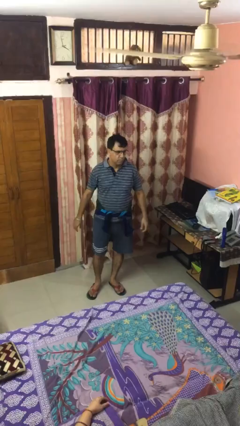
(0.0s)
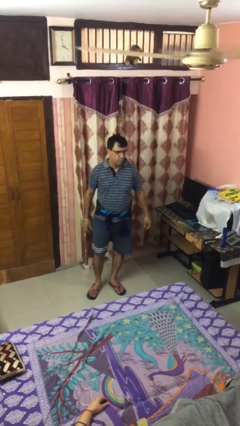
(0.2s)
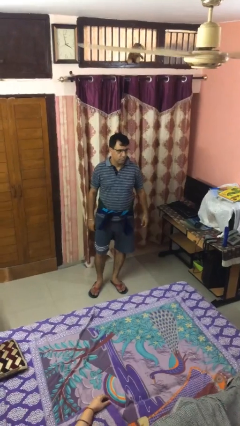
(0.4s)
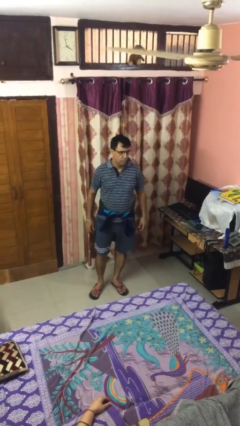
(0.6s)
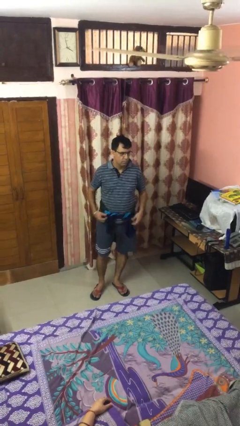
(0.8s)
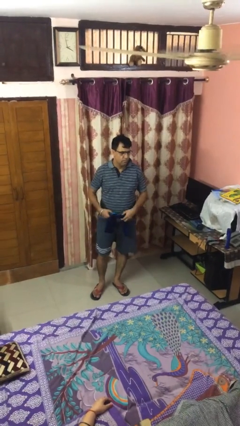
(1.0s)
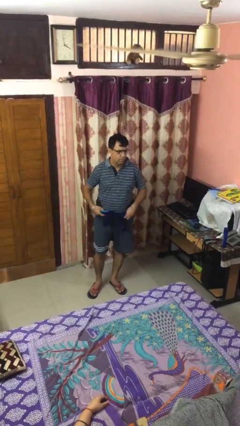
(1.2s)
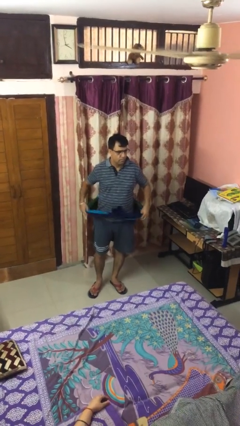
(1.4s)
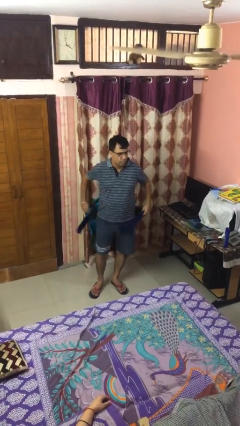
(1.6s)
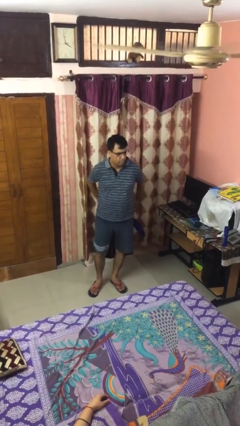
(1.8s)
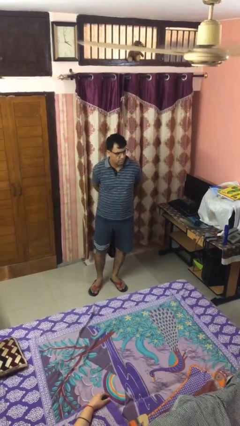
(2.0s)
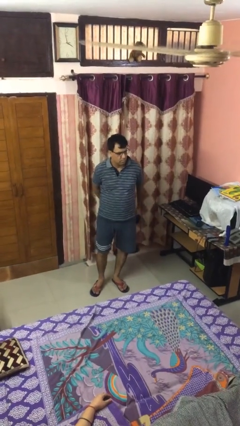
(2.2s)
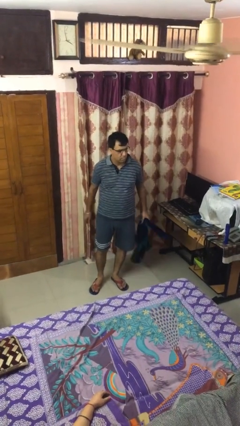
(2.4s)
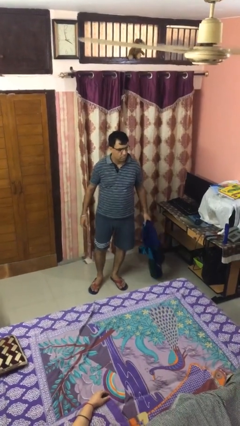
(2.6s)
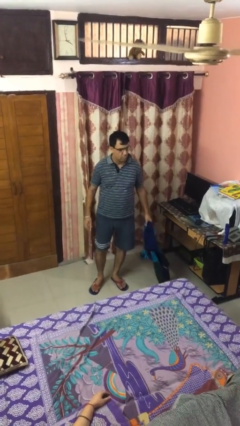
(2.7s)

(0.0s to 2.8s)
person unties jacket around waist

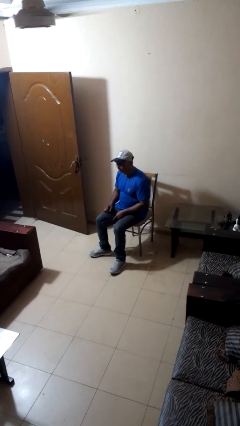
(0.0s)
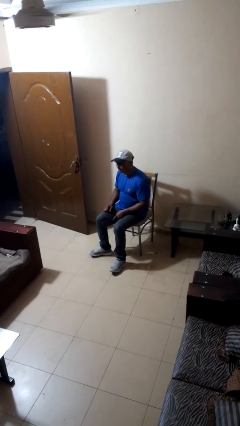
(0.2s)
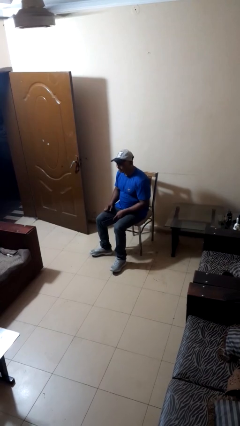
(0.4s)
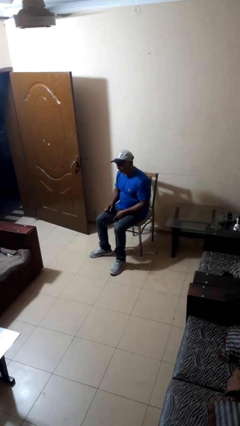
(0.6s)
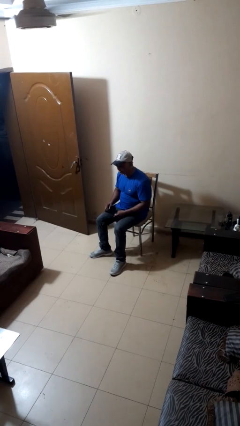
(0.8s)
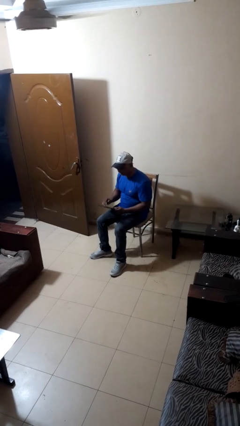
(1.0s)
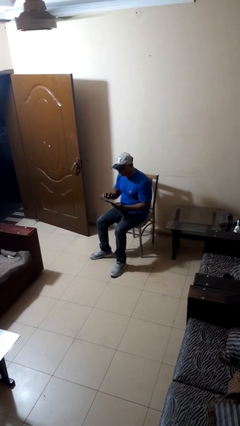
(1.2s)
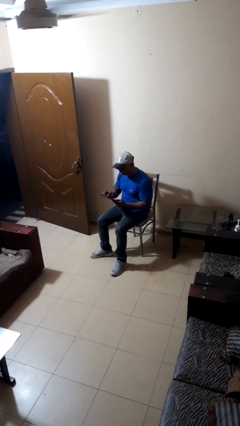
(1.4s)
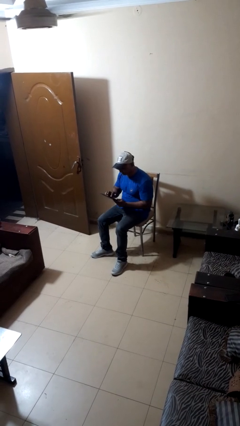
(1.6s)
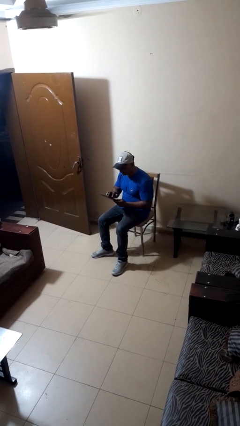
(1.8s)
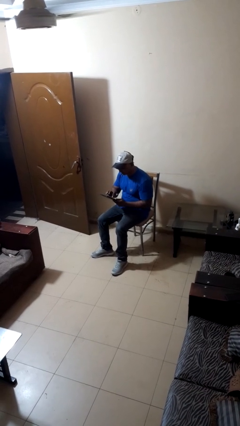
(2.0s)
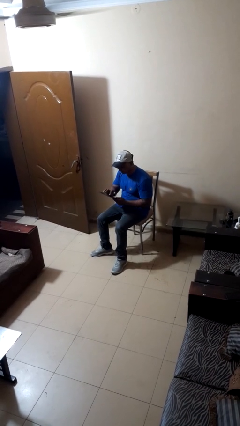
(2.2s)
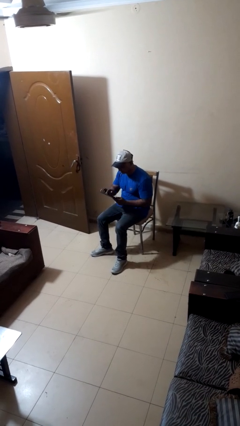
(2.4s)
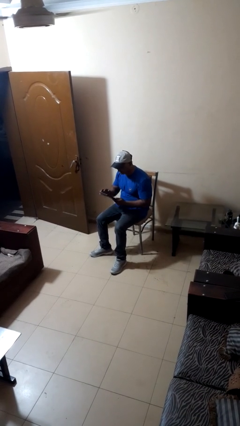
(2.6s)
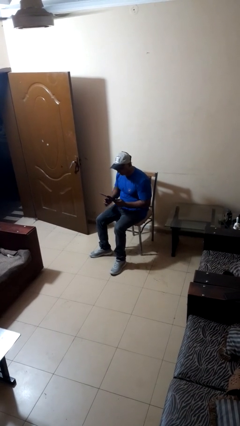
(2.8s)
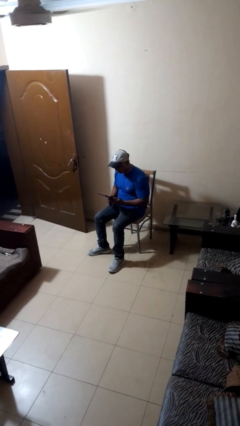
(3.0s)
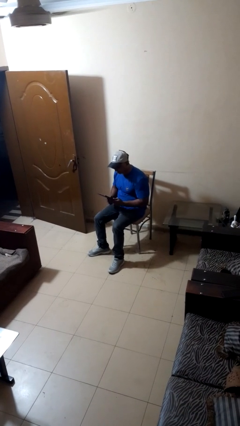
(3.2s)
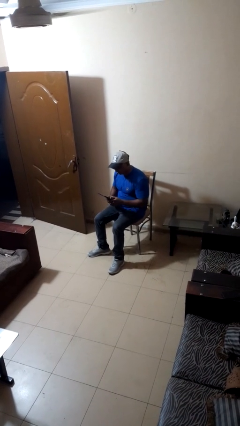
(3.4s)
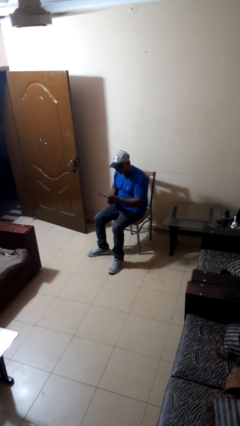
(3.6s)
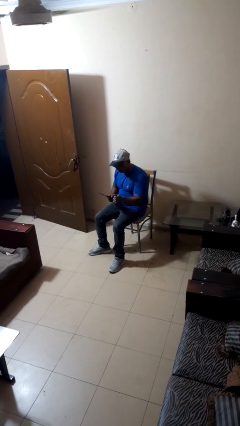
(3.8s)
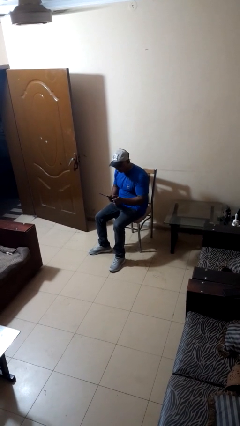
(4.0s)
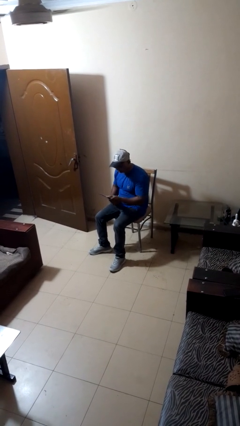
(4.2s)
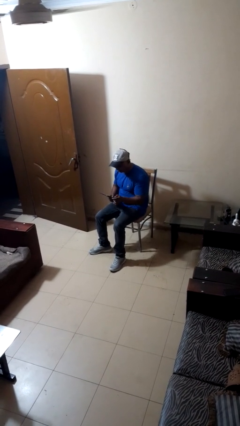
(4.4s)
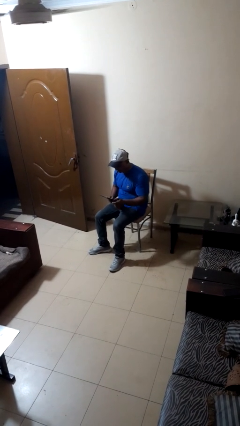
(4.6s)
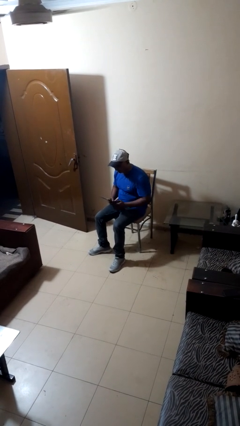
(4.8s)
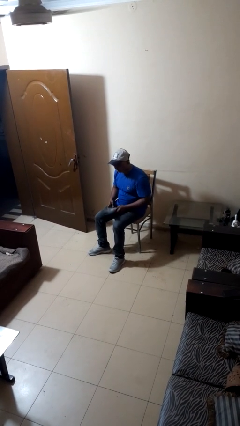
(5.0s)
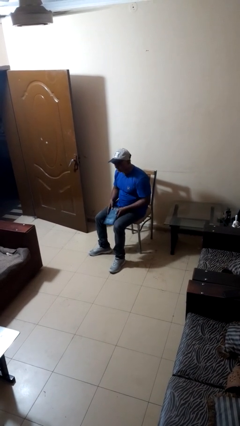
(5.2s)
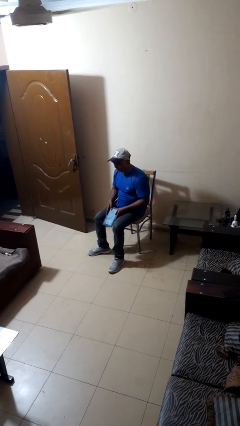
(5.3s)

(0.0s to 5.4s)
person interacts with tablet

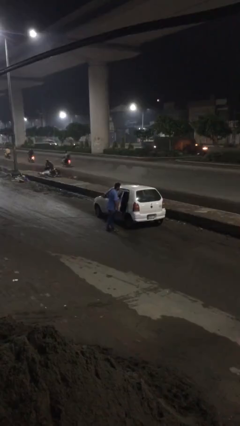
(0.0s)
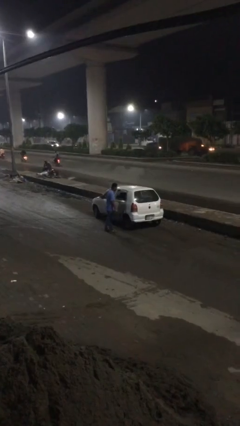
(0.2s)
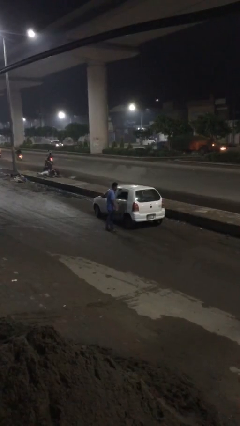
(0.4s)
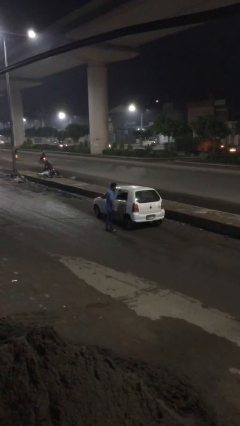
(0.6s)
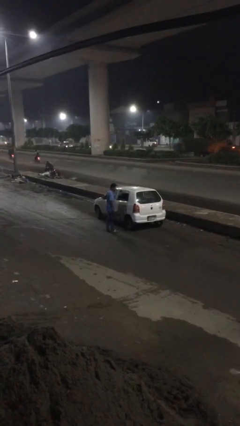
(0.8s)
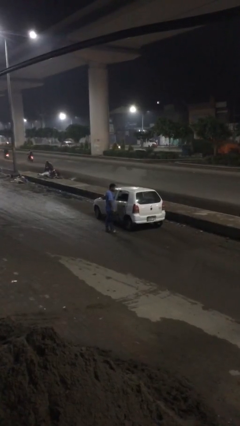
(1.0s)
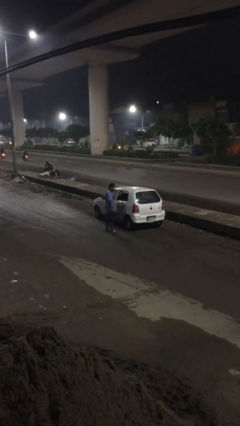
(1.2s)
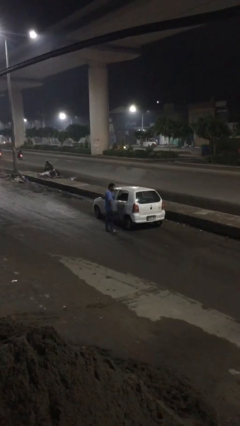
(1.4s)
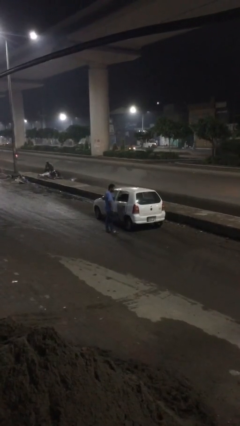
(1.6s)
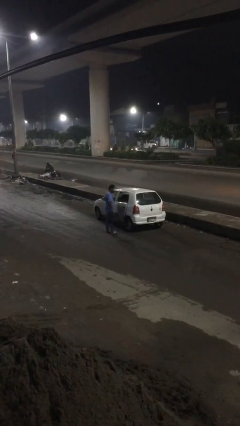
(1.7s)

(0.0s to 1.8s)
person closes car door

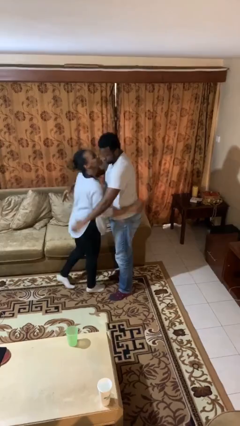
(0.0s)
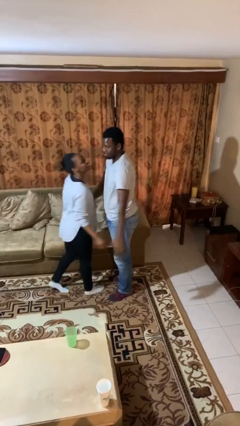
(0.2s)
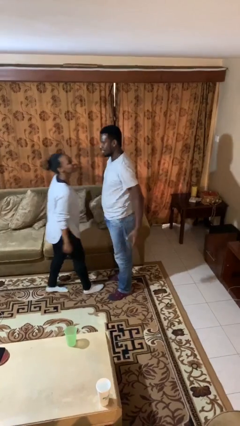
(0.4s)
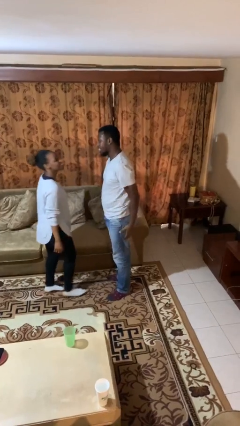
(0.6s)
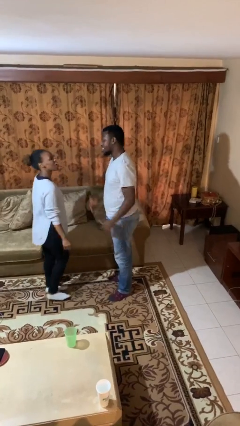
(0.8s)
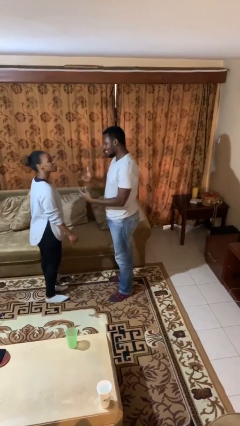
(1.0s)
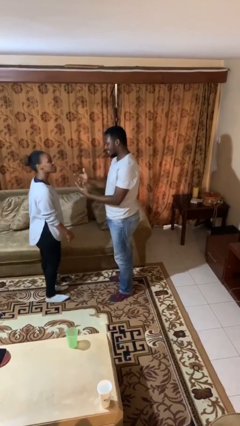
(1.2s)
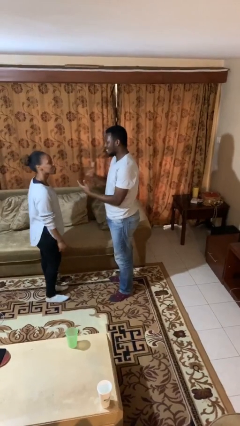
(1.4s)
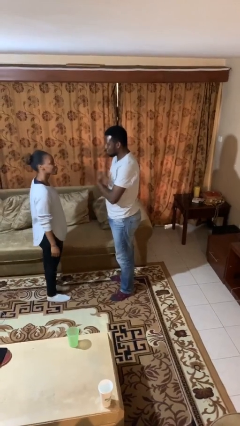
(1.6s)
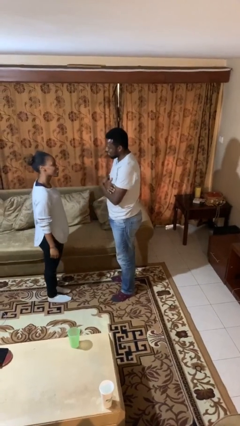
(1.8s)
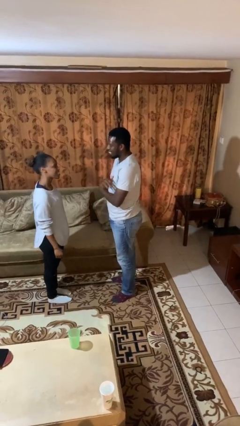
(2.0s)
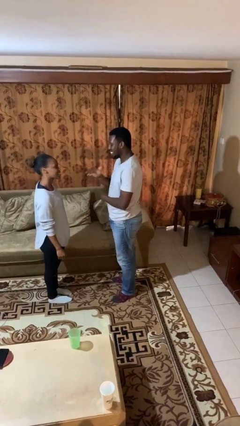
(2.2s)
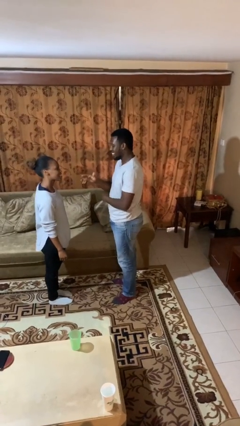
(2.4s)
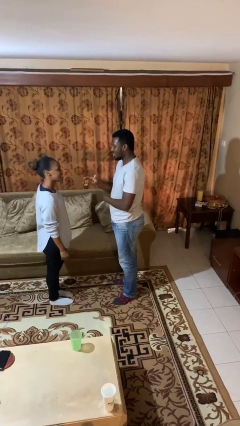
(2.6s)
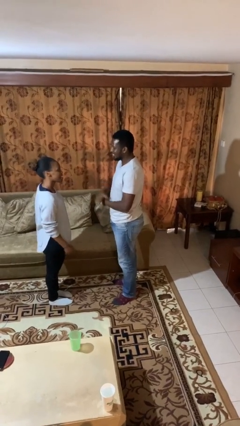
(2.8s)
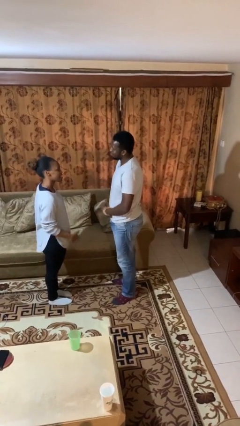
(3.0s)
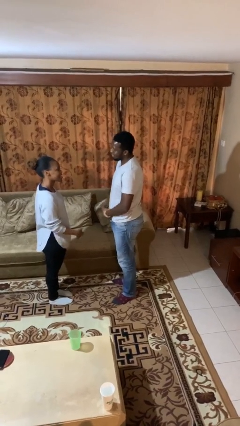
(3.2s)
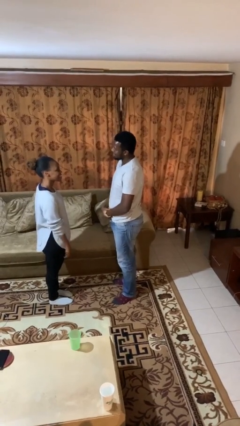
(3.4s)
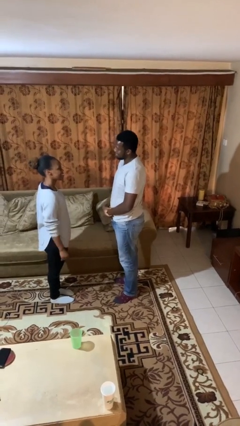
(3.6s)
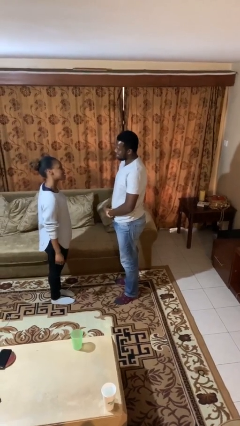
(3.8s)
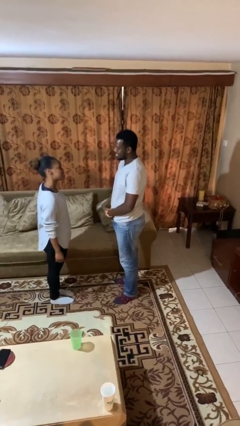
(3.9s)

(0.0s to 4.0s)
person talks to person

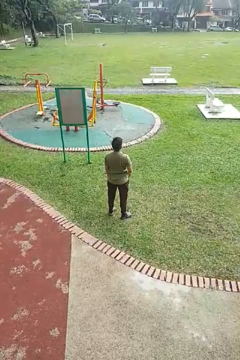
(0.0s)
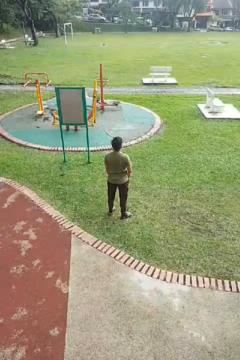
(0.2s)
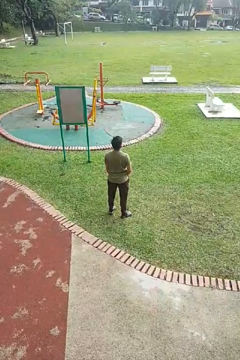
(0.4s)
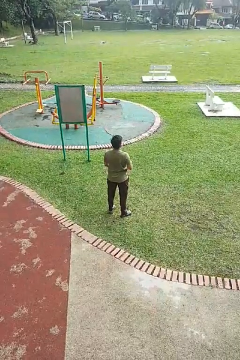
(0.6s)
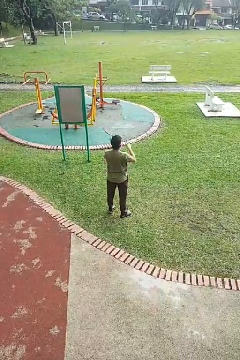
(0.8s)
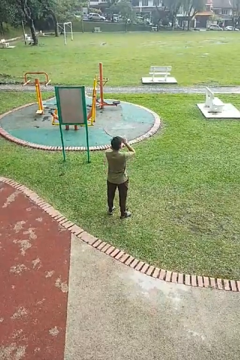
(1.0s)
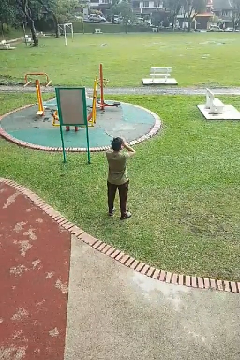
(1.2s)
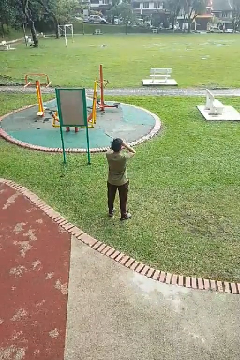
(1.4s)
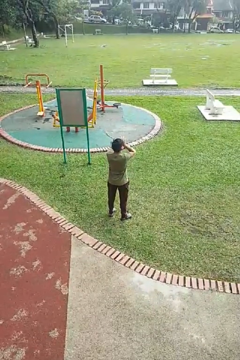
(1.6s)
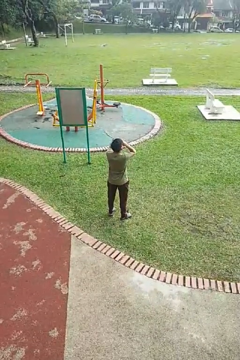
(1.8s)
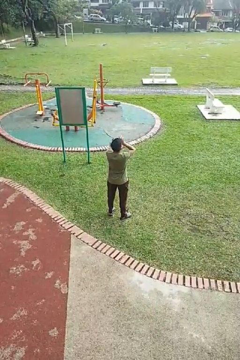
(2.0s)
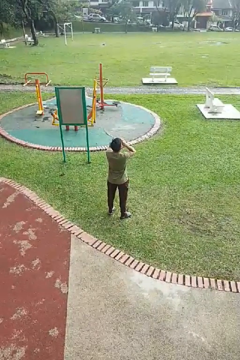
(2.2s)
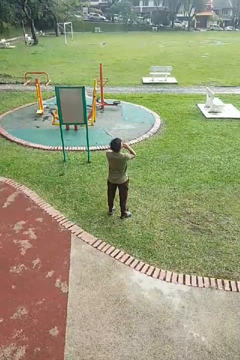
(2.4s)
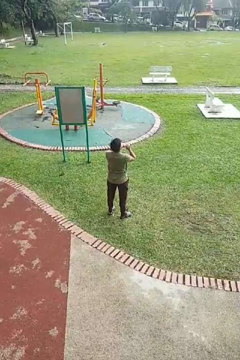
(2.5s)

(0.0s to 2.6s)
person rubs eyes

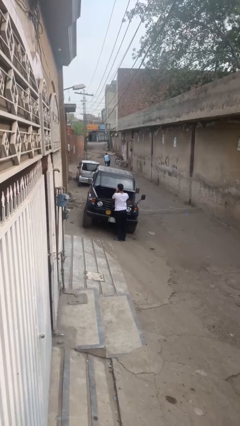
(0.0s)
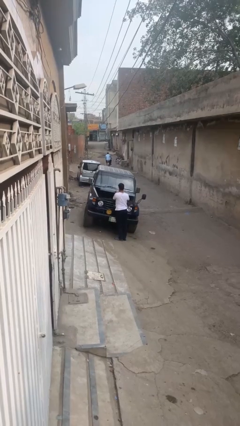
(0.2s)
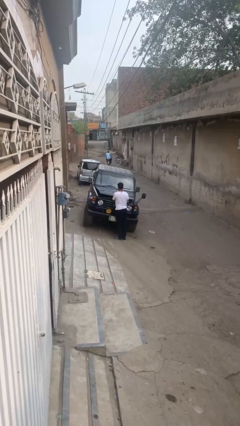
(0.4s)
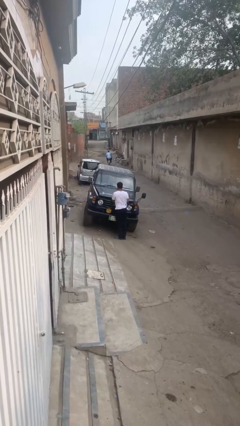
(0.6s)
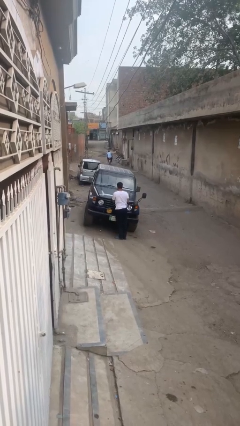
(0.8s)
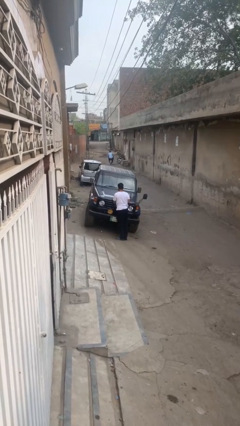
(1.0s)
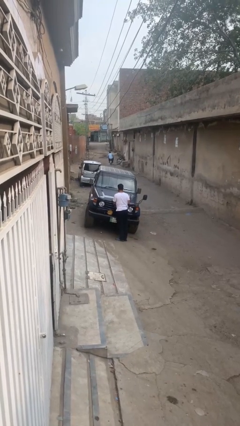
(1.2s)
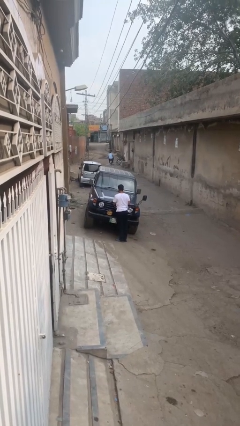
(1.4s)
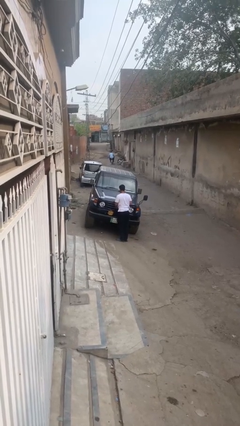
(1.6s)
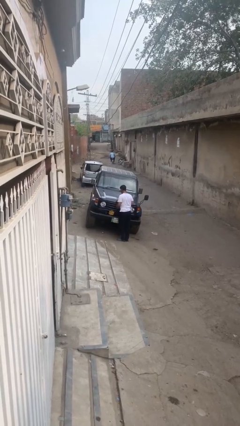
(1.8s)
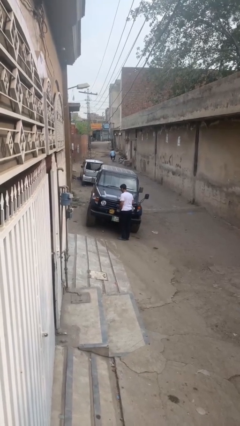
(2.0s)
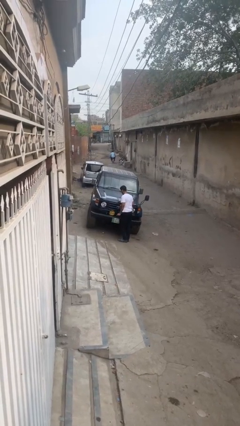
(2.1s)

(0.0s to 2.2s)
person closes car hood
